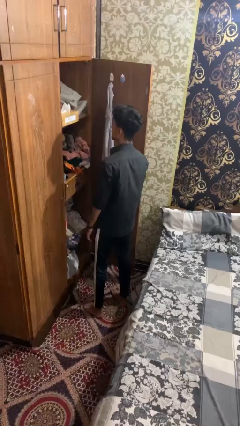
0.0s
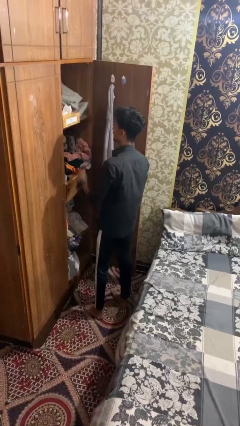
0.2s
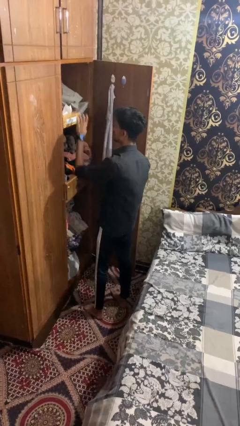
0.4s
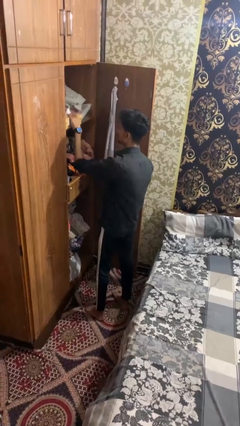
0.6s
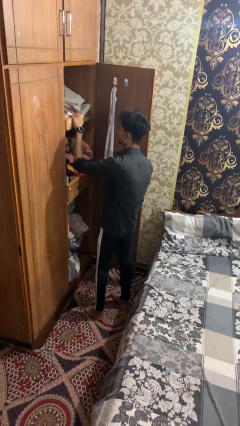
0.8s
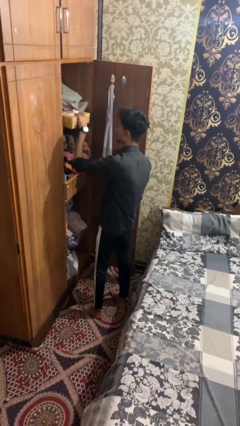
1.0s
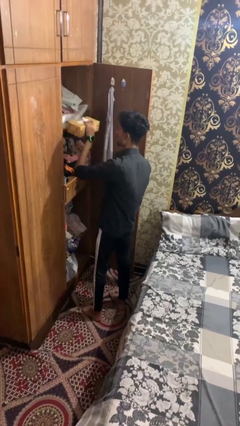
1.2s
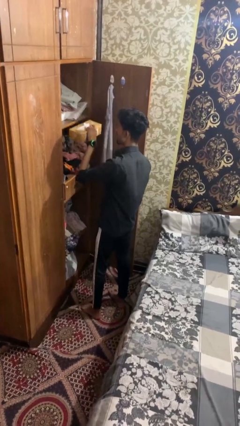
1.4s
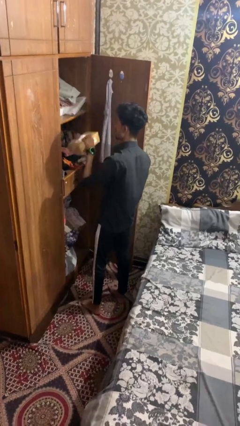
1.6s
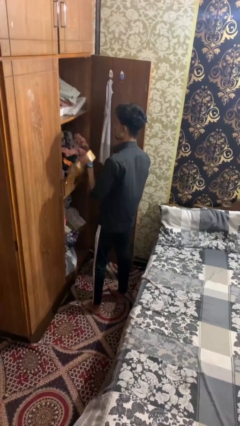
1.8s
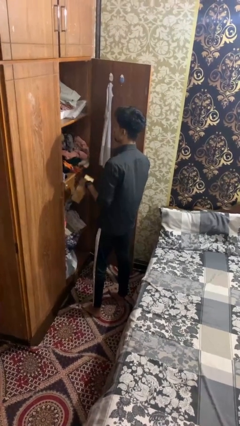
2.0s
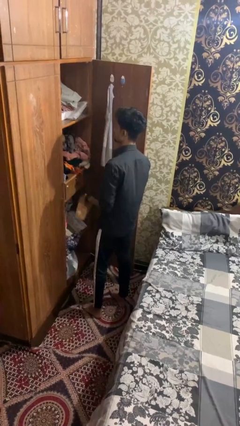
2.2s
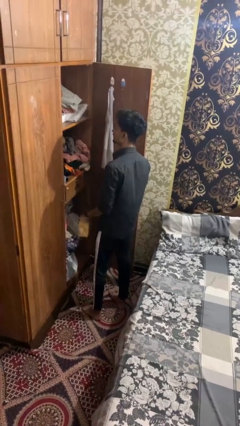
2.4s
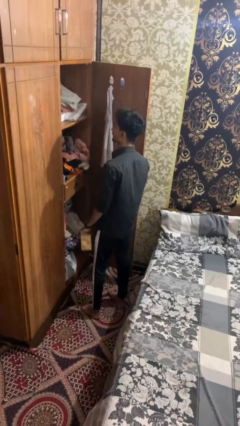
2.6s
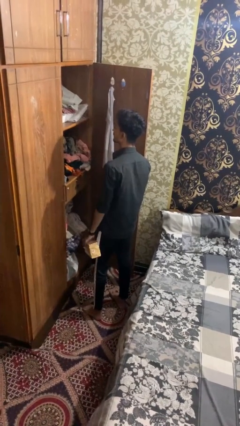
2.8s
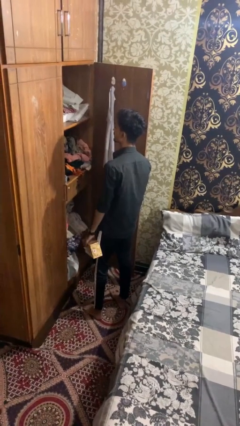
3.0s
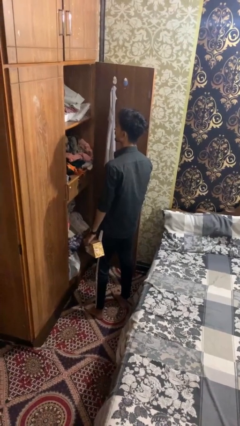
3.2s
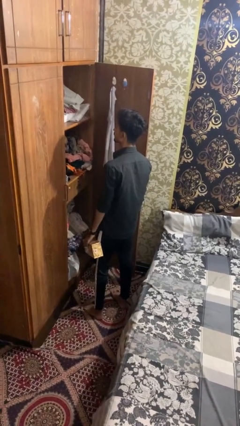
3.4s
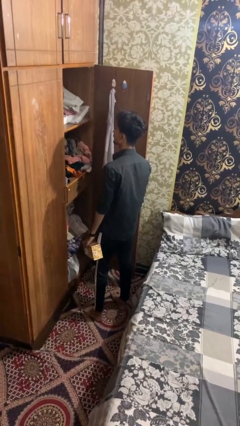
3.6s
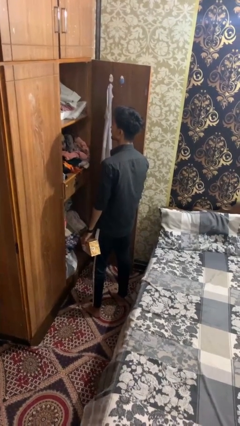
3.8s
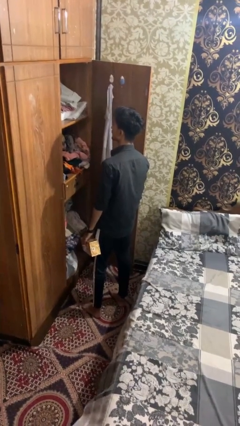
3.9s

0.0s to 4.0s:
person picks up object from countertop

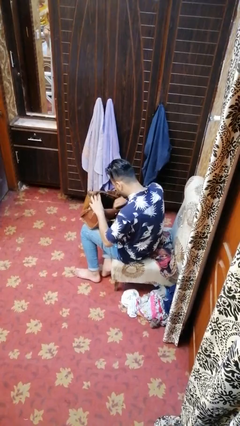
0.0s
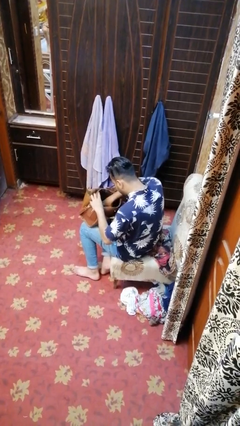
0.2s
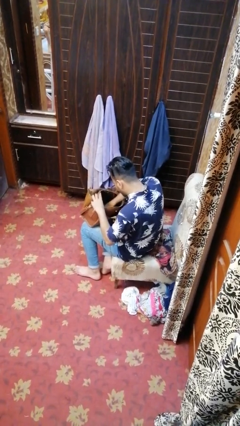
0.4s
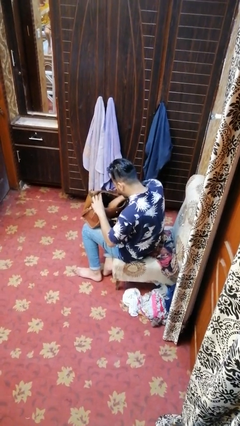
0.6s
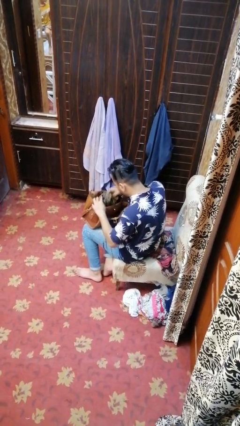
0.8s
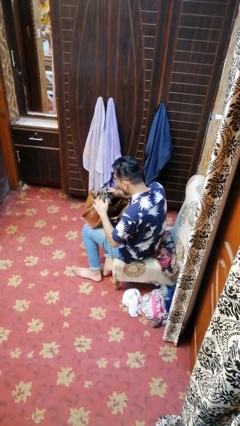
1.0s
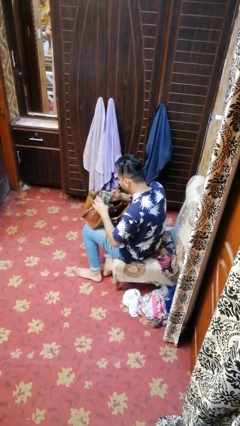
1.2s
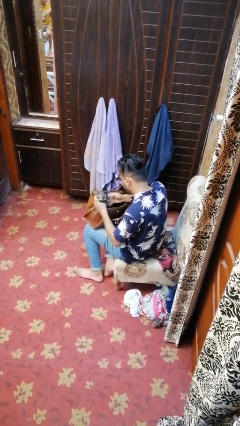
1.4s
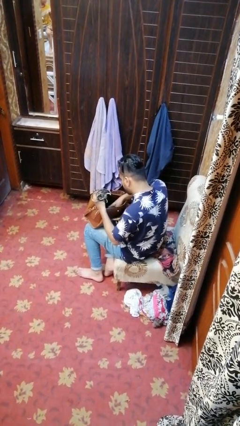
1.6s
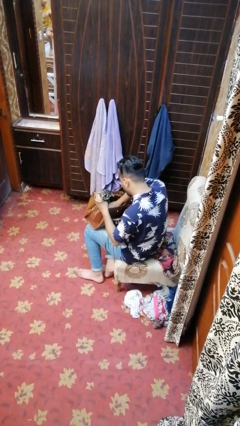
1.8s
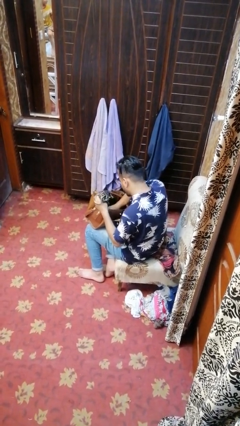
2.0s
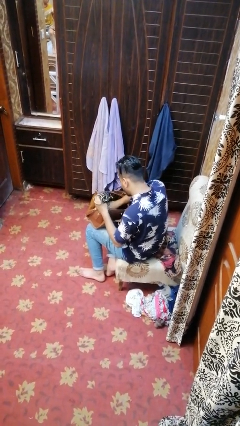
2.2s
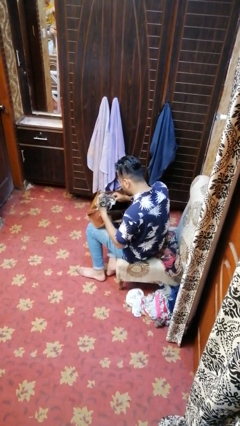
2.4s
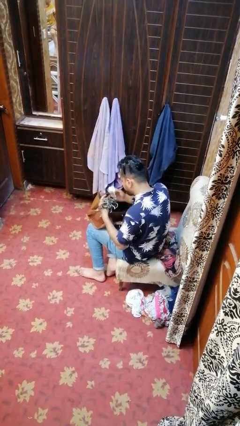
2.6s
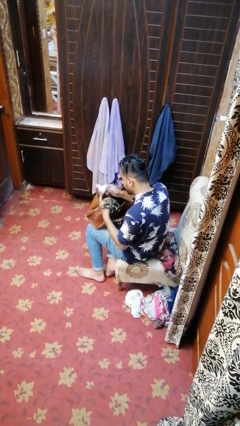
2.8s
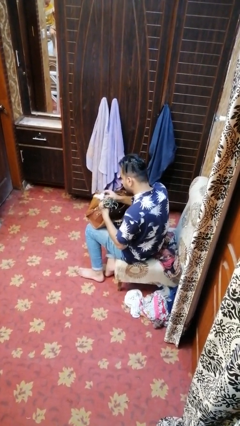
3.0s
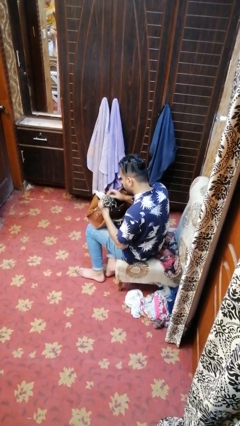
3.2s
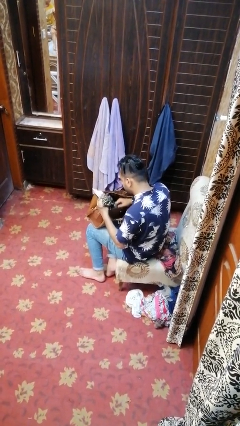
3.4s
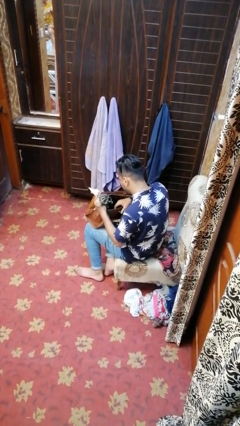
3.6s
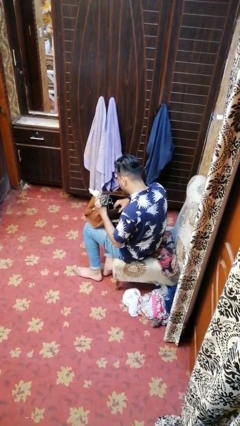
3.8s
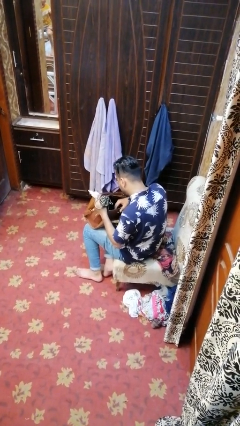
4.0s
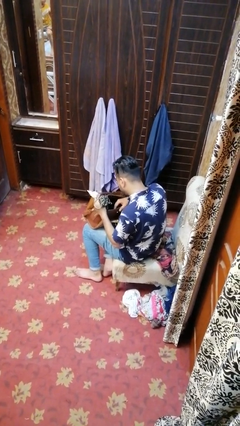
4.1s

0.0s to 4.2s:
person takes object from purse

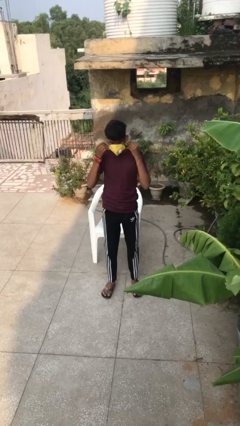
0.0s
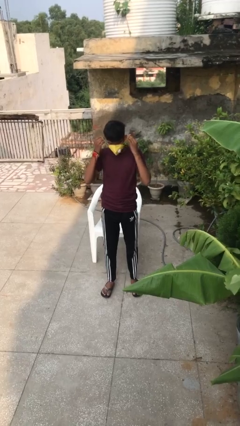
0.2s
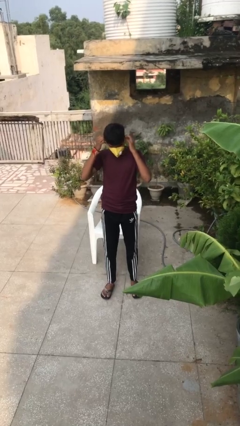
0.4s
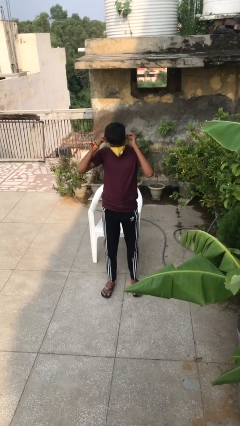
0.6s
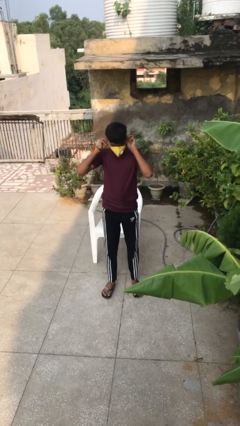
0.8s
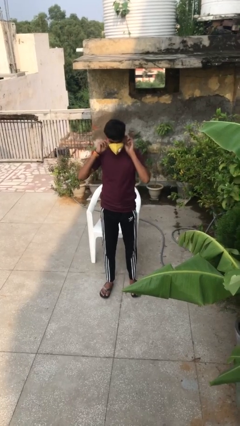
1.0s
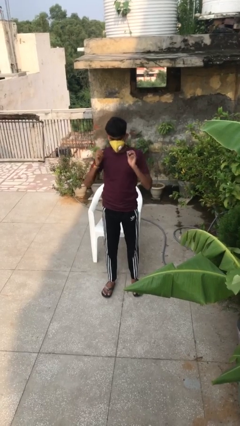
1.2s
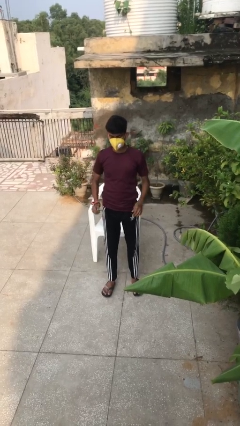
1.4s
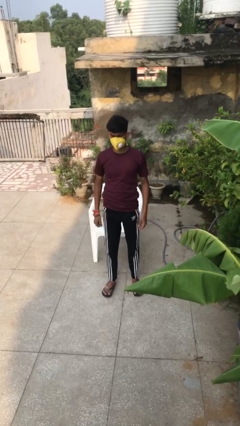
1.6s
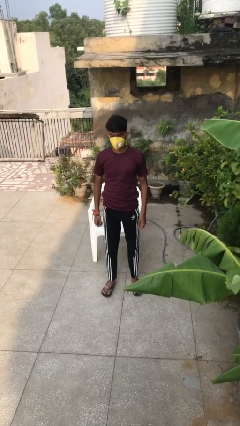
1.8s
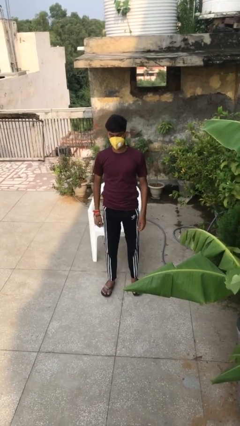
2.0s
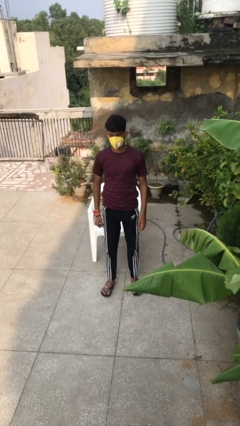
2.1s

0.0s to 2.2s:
person puts on facemask

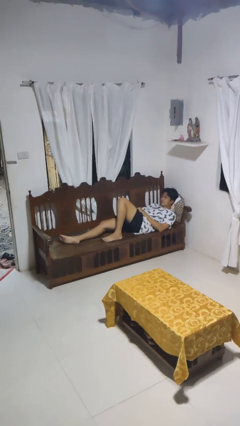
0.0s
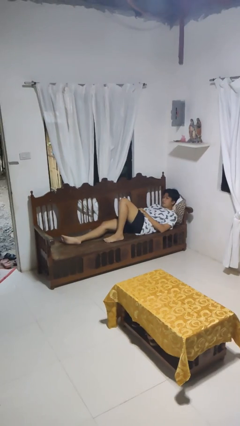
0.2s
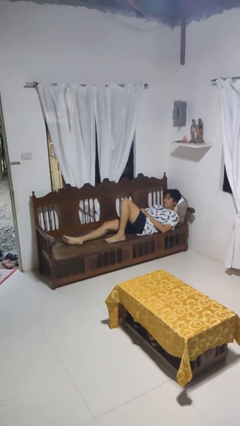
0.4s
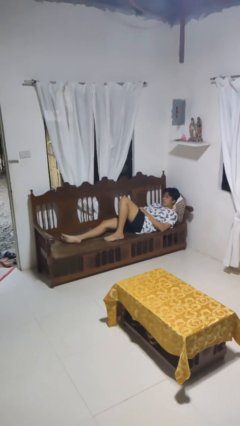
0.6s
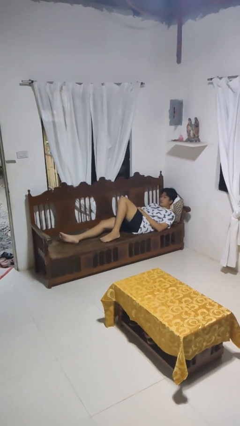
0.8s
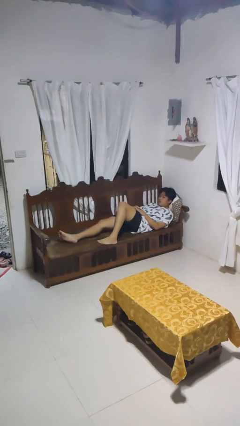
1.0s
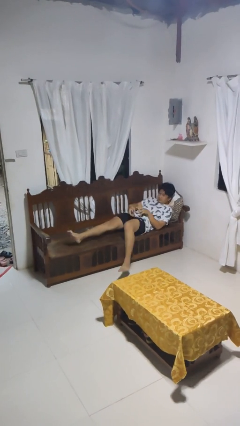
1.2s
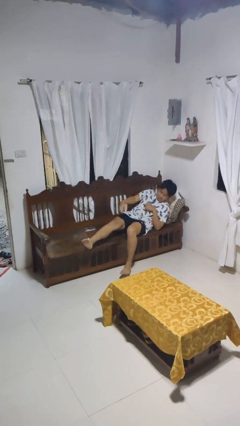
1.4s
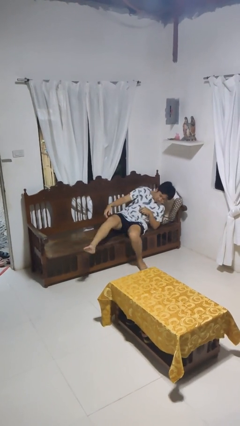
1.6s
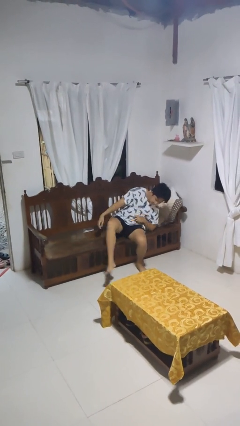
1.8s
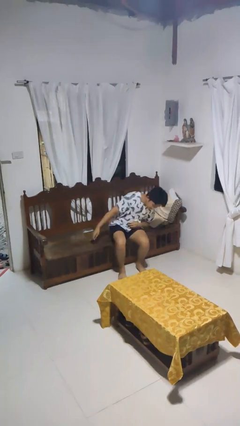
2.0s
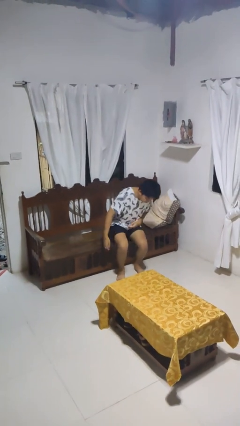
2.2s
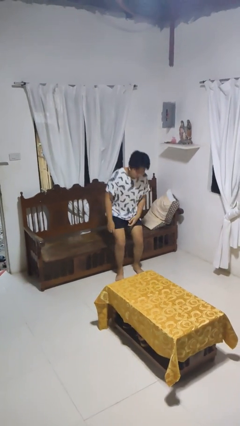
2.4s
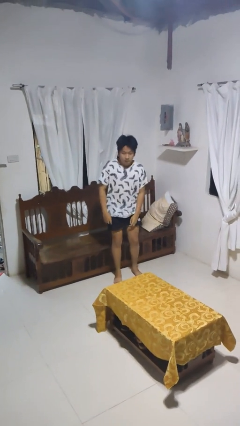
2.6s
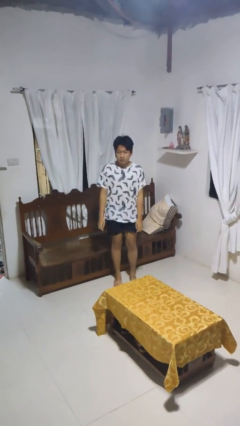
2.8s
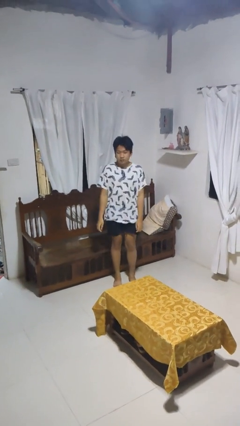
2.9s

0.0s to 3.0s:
person stands up

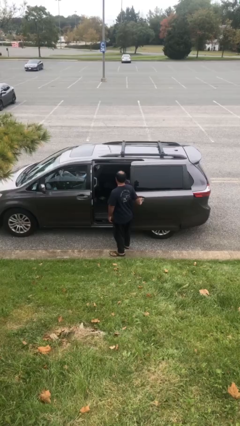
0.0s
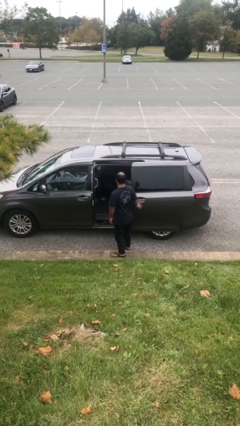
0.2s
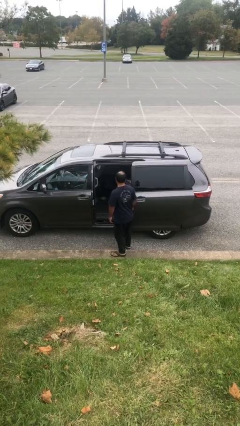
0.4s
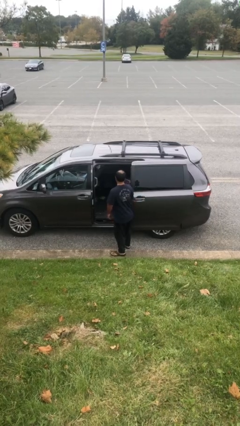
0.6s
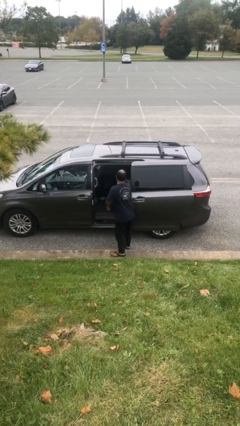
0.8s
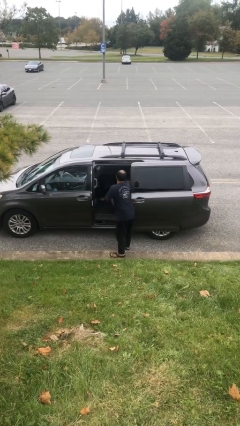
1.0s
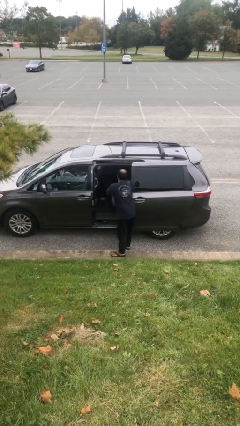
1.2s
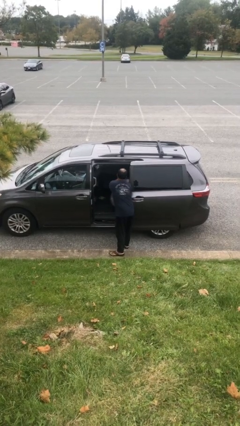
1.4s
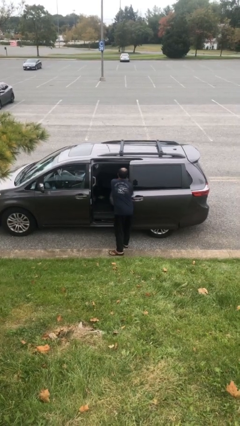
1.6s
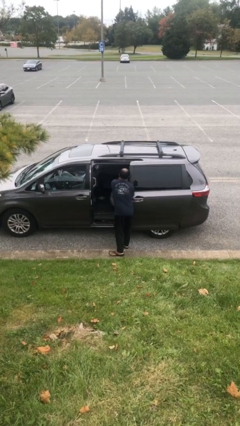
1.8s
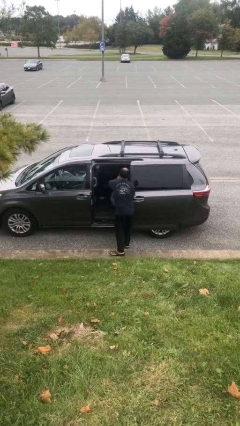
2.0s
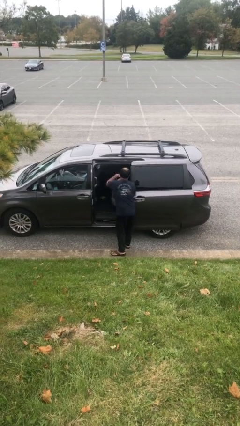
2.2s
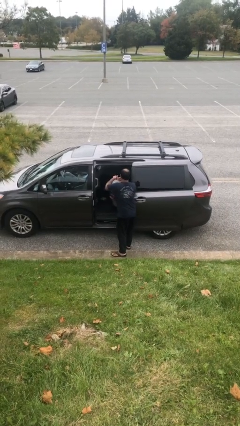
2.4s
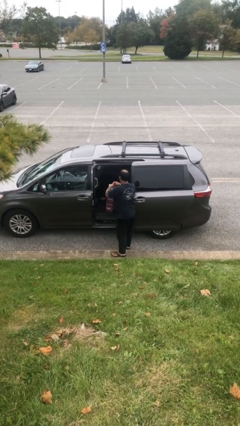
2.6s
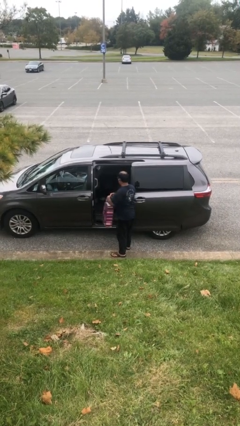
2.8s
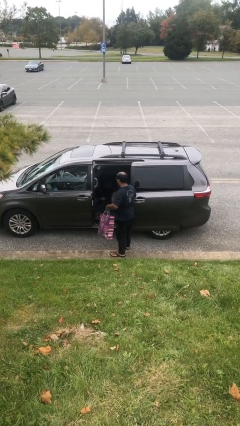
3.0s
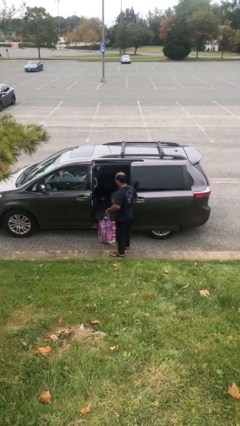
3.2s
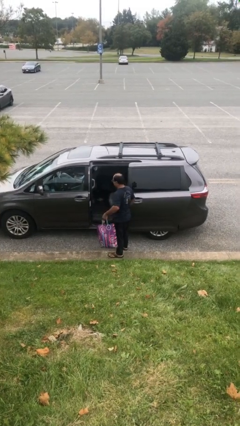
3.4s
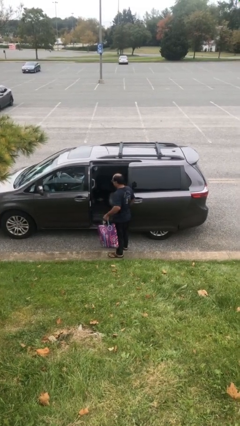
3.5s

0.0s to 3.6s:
person unloads car

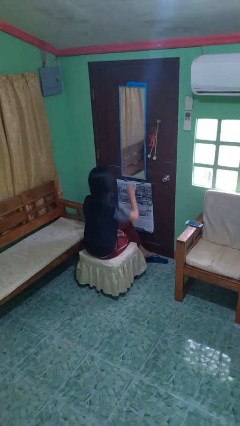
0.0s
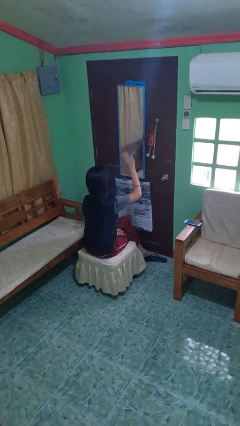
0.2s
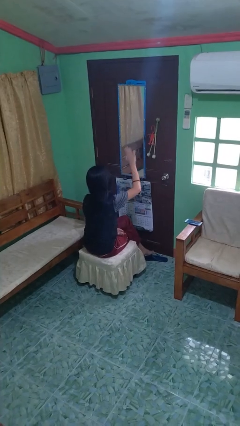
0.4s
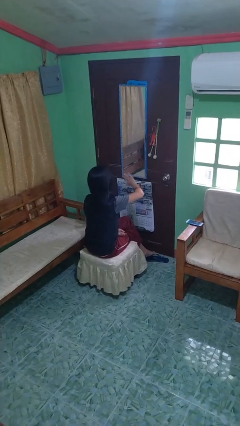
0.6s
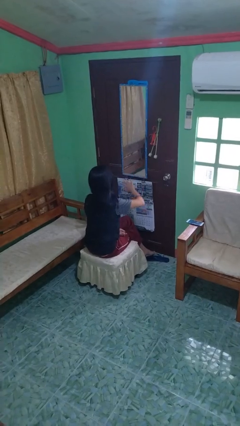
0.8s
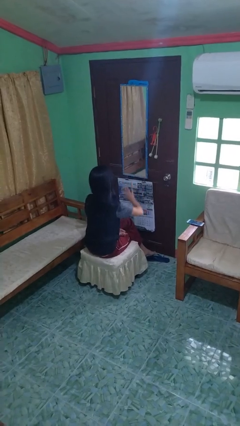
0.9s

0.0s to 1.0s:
person gestures swipe up
